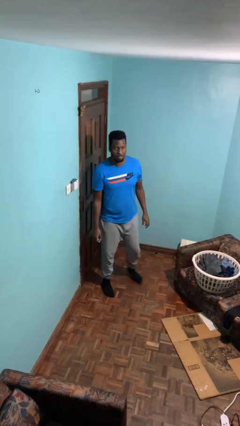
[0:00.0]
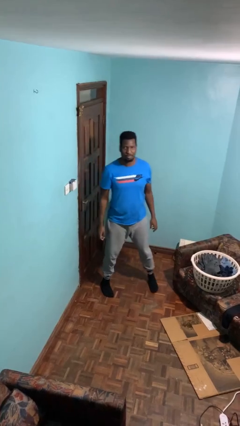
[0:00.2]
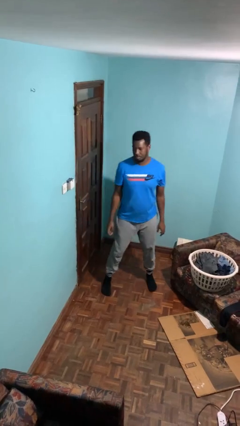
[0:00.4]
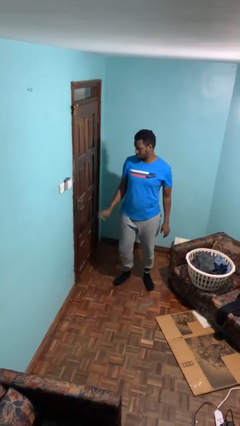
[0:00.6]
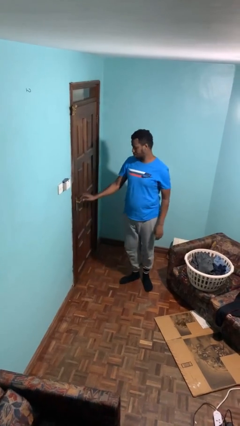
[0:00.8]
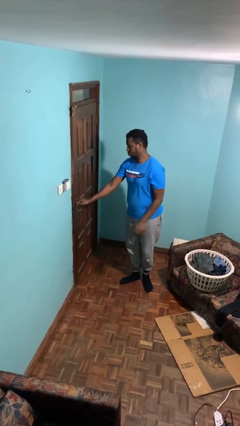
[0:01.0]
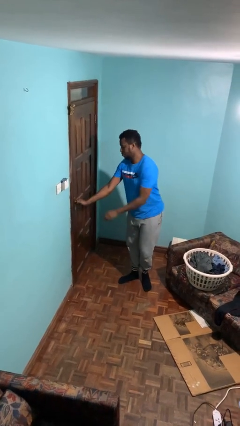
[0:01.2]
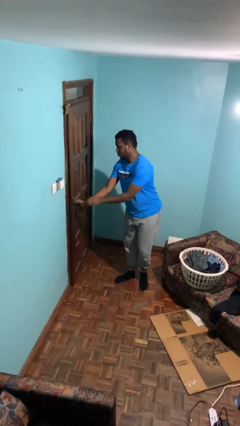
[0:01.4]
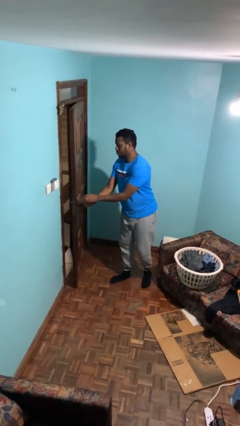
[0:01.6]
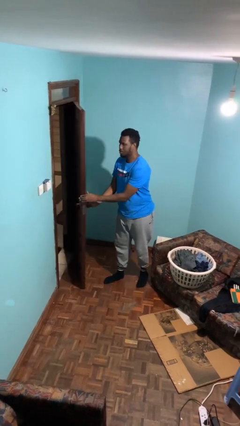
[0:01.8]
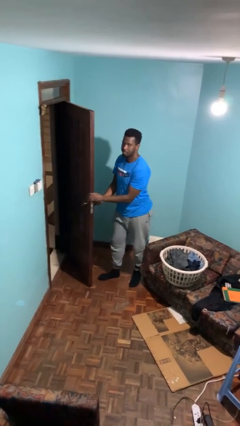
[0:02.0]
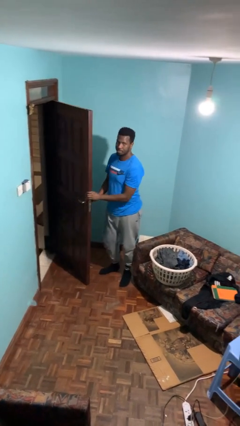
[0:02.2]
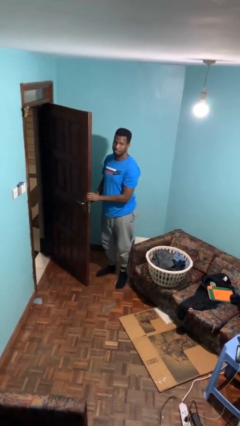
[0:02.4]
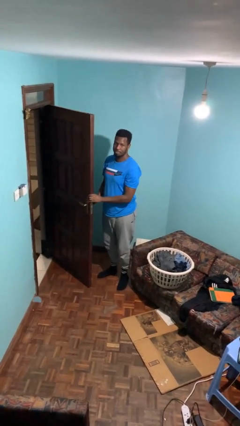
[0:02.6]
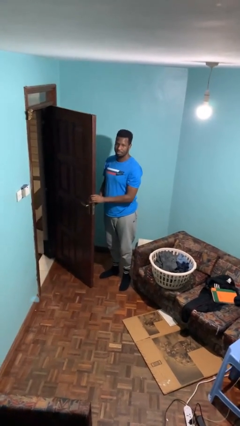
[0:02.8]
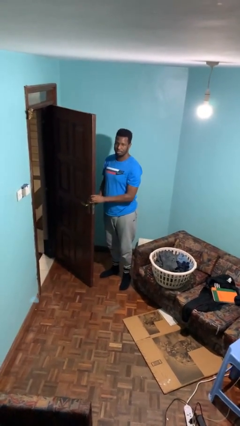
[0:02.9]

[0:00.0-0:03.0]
person opens facility door

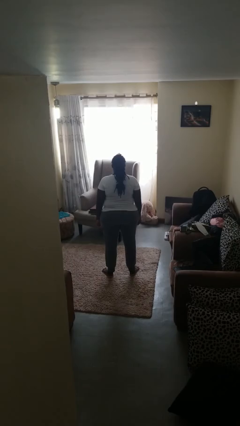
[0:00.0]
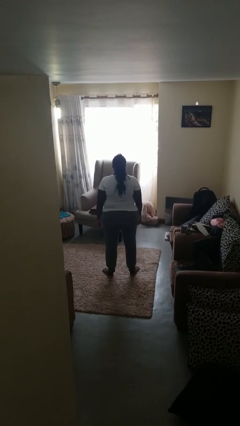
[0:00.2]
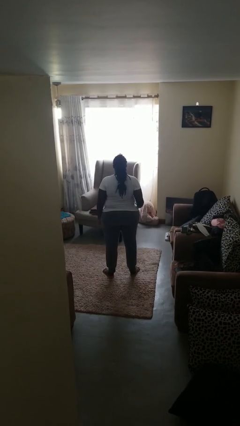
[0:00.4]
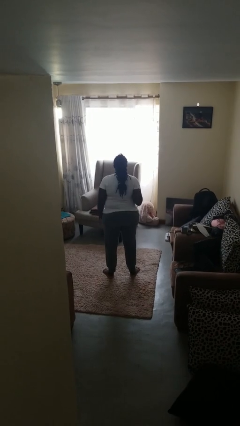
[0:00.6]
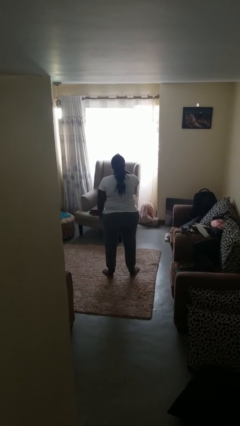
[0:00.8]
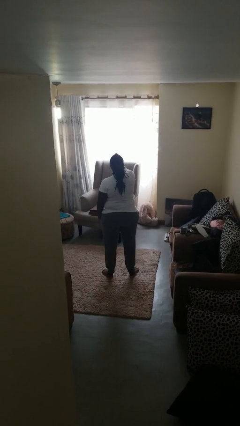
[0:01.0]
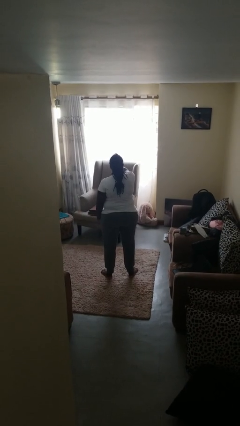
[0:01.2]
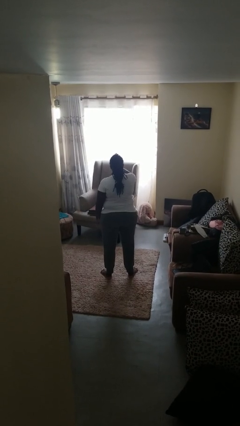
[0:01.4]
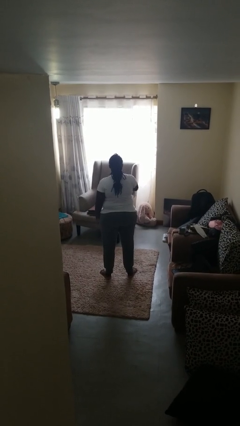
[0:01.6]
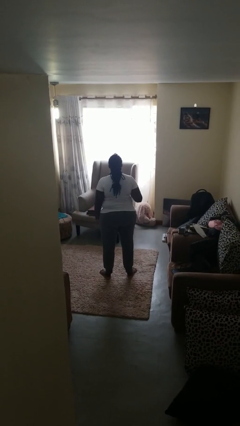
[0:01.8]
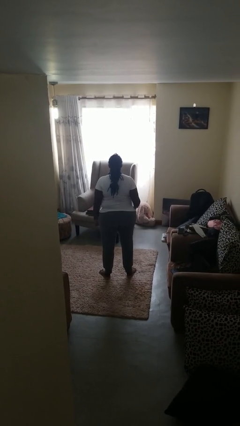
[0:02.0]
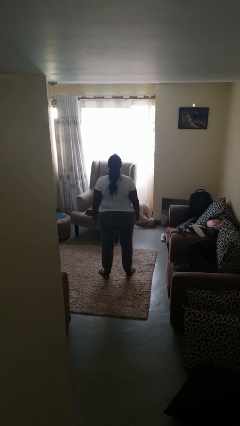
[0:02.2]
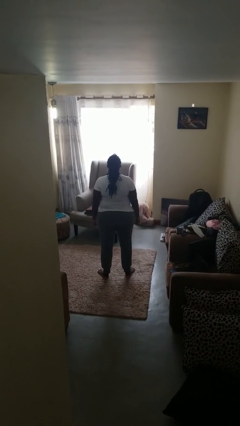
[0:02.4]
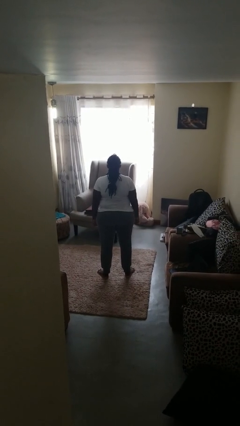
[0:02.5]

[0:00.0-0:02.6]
person punches

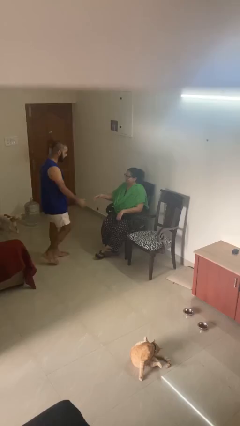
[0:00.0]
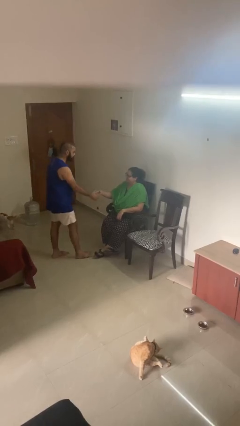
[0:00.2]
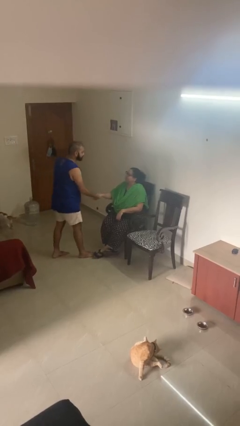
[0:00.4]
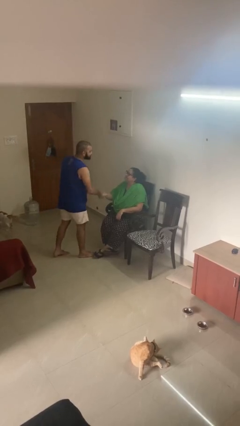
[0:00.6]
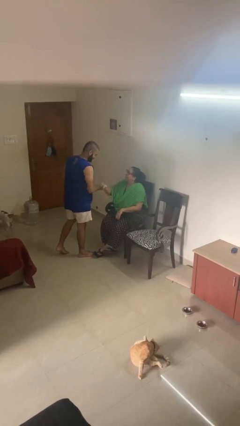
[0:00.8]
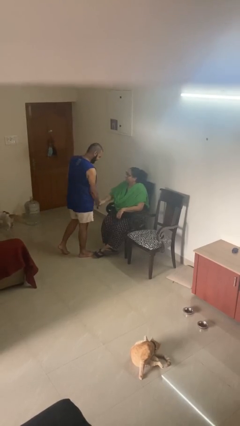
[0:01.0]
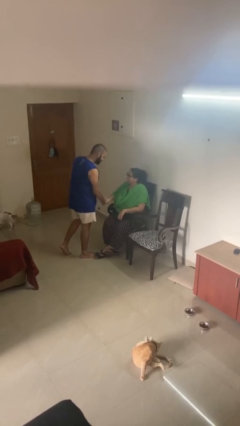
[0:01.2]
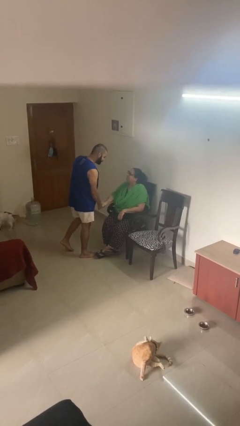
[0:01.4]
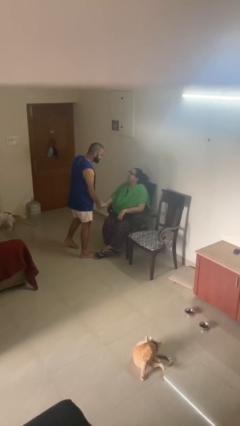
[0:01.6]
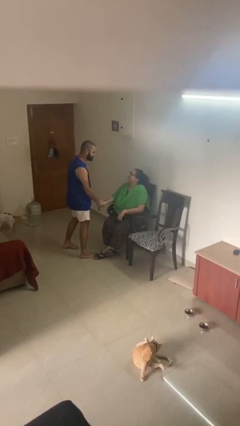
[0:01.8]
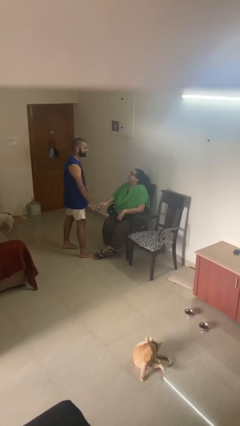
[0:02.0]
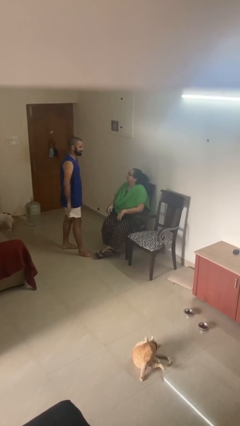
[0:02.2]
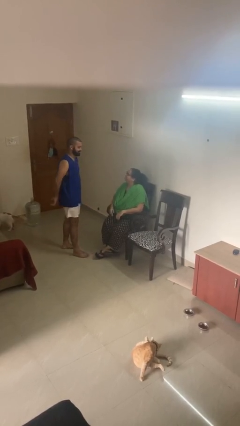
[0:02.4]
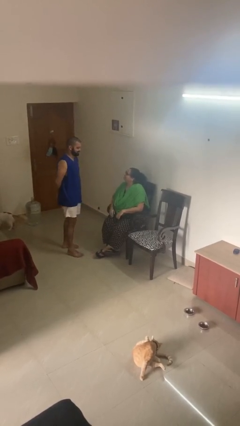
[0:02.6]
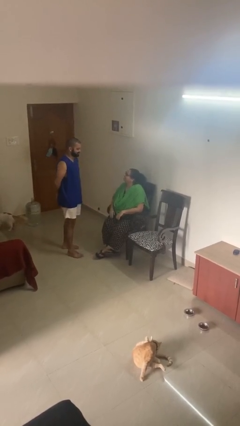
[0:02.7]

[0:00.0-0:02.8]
person shakes hand

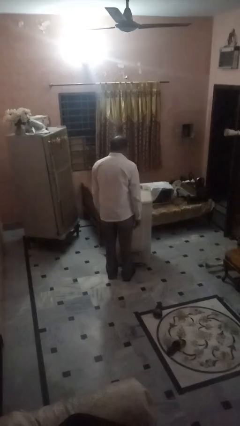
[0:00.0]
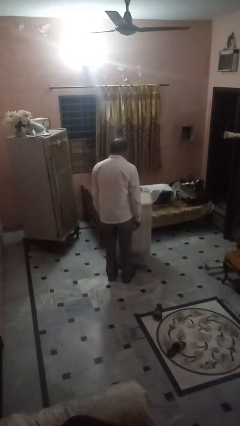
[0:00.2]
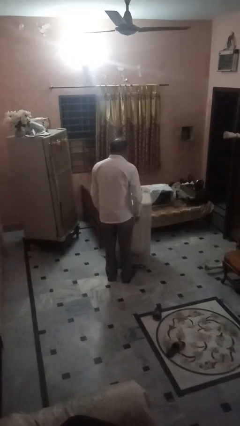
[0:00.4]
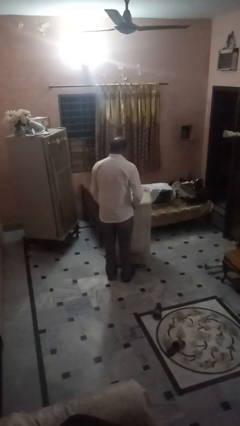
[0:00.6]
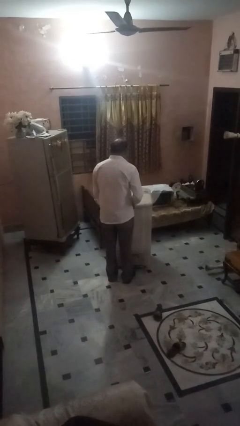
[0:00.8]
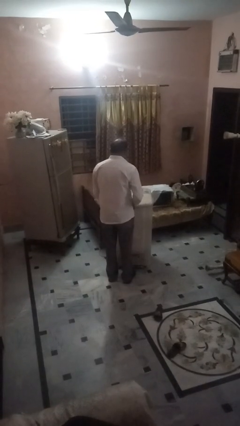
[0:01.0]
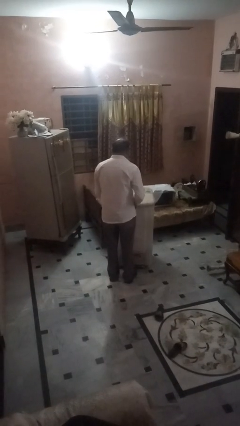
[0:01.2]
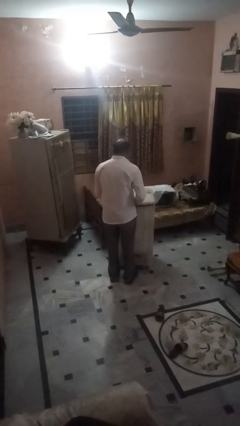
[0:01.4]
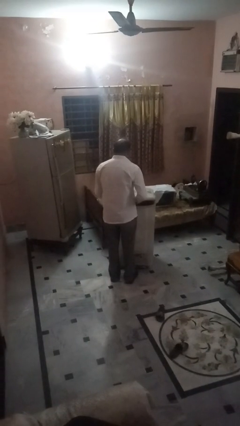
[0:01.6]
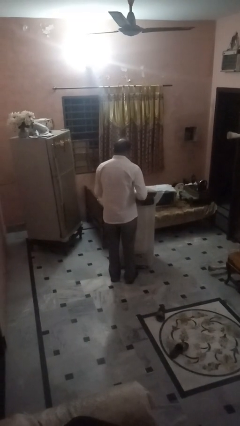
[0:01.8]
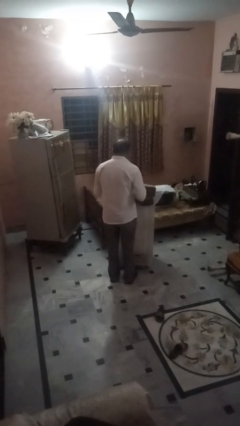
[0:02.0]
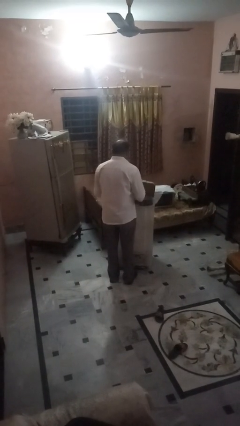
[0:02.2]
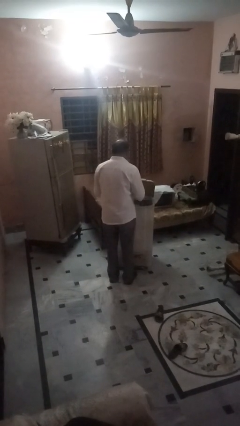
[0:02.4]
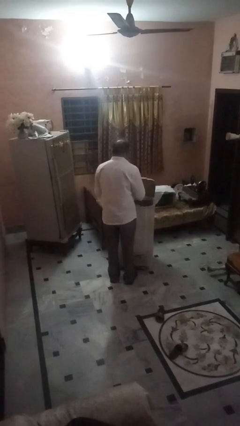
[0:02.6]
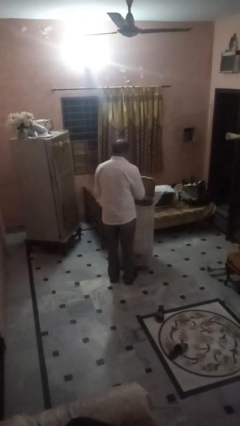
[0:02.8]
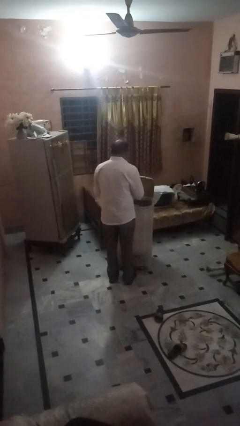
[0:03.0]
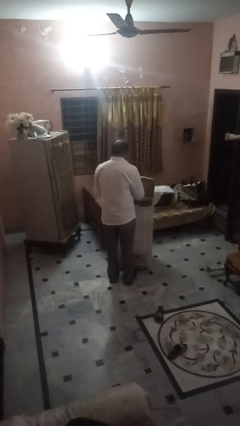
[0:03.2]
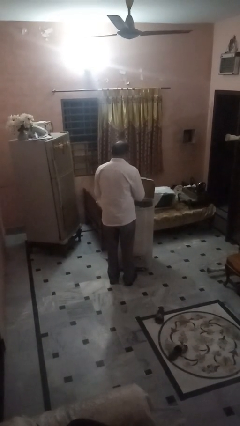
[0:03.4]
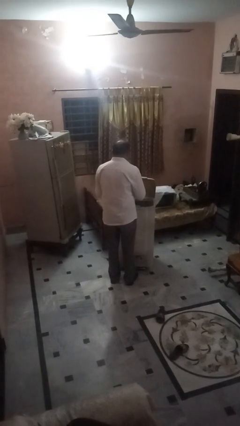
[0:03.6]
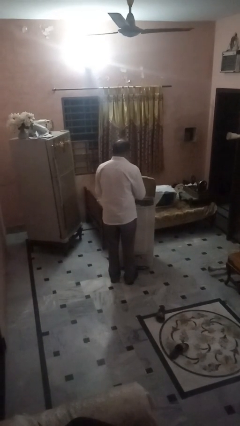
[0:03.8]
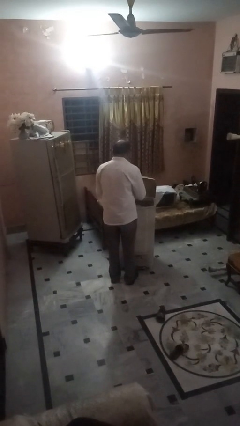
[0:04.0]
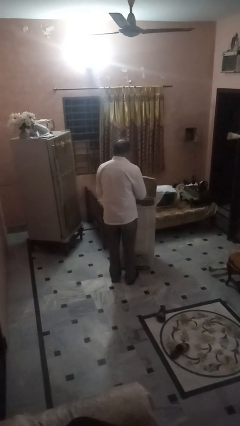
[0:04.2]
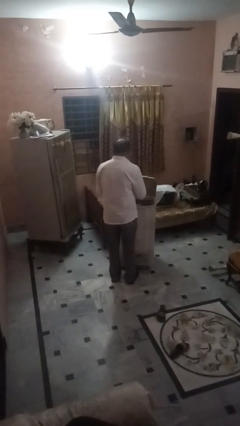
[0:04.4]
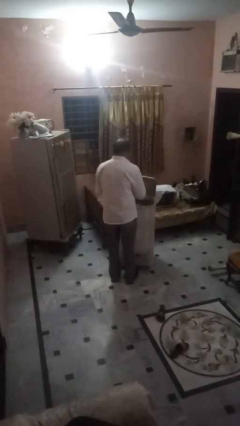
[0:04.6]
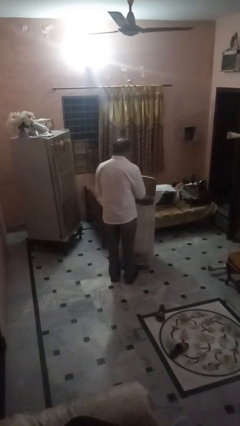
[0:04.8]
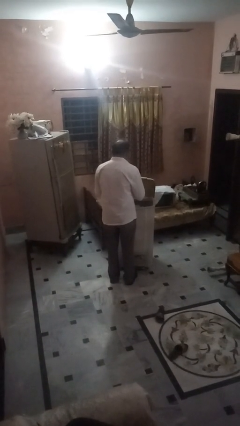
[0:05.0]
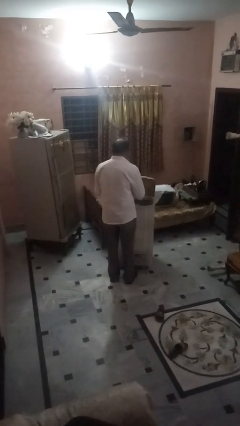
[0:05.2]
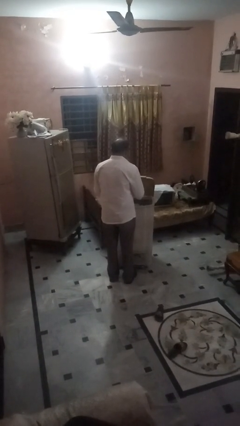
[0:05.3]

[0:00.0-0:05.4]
person opens clothes washer

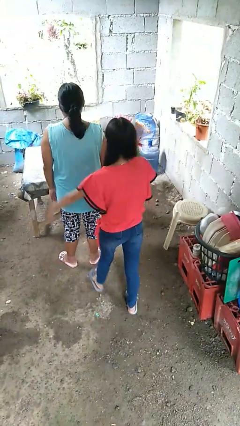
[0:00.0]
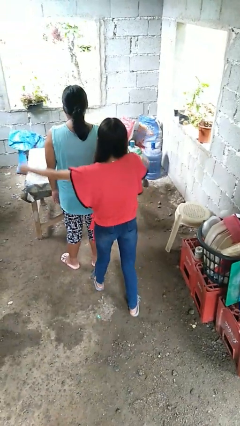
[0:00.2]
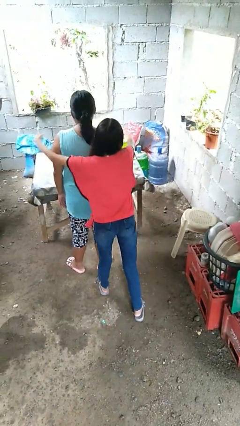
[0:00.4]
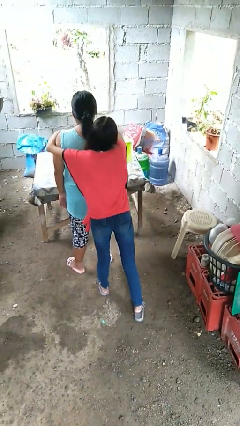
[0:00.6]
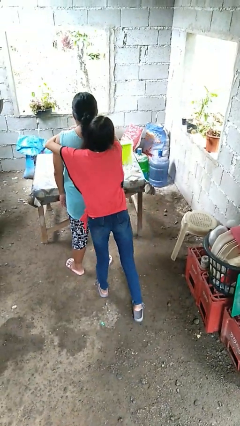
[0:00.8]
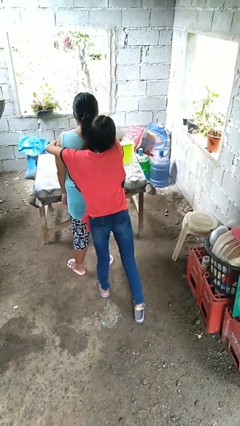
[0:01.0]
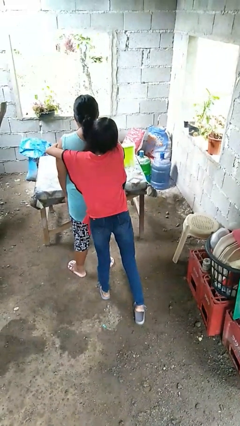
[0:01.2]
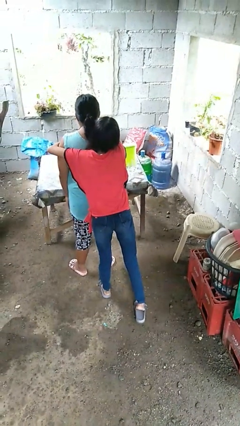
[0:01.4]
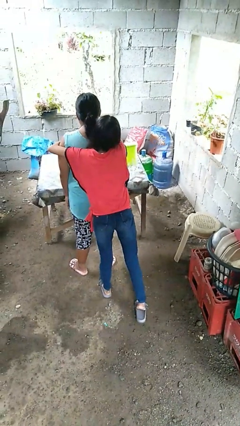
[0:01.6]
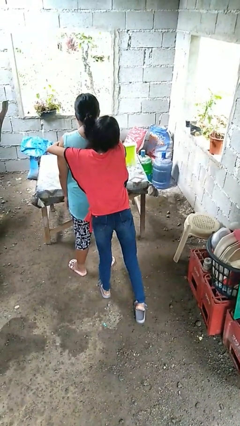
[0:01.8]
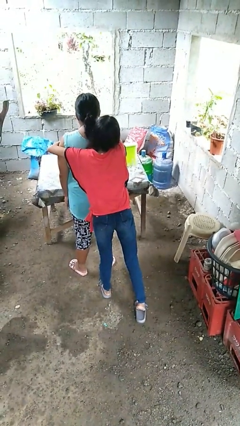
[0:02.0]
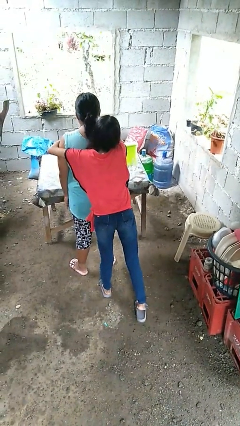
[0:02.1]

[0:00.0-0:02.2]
person hugs person from behind

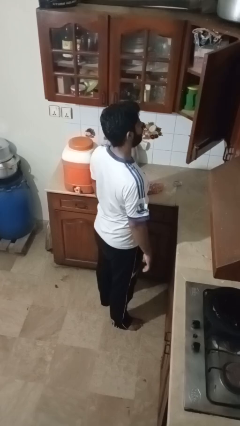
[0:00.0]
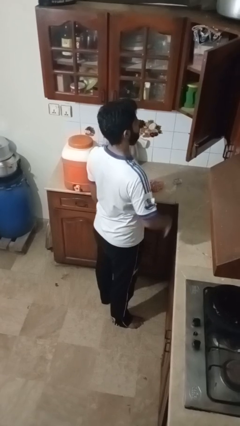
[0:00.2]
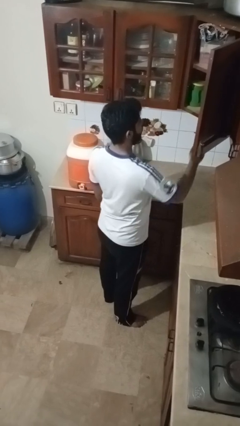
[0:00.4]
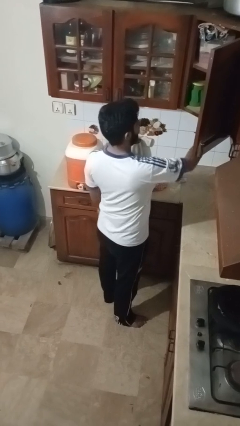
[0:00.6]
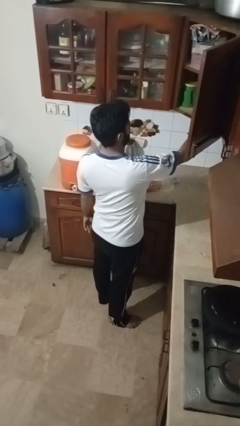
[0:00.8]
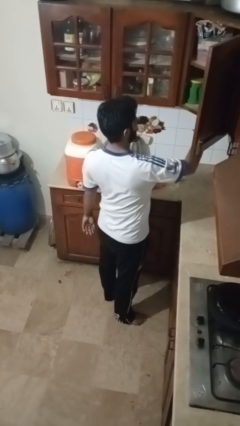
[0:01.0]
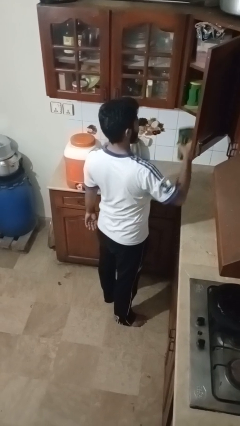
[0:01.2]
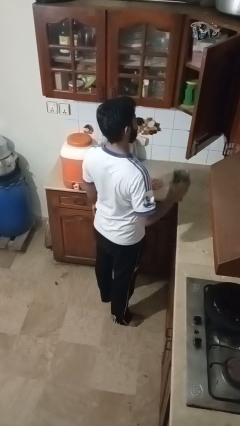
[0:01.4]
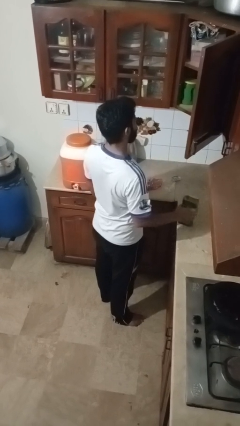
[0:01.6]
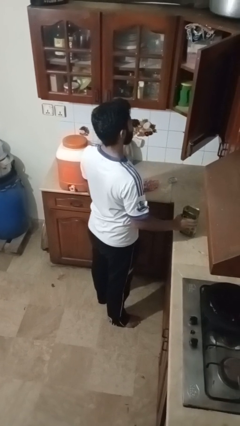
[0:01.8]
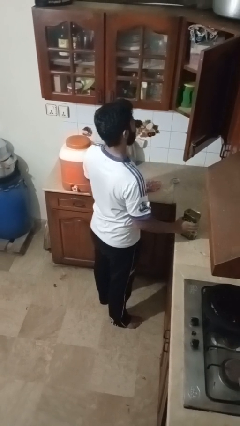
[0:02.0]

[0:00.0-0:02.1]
person takes object from cabinet
